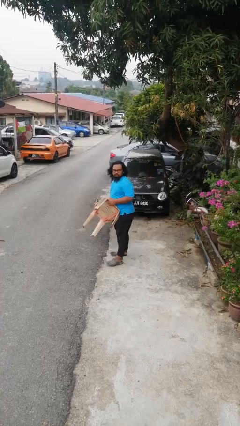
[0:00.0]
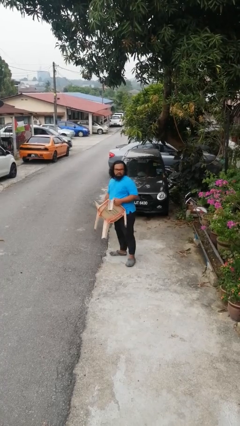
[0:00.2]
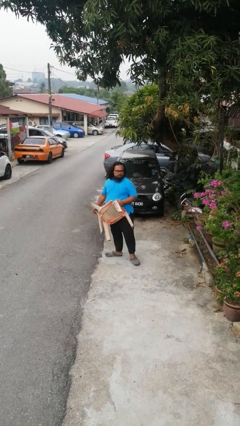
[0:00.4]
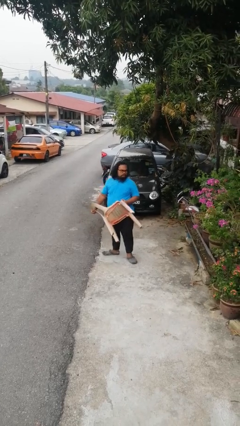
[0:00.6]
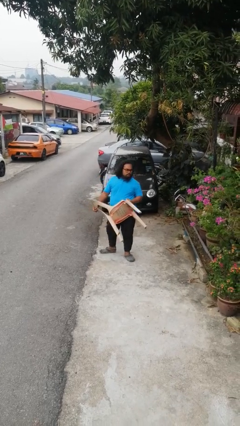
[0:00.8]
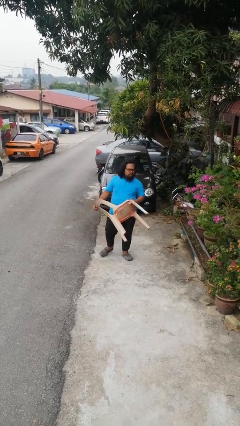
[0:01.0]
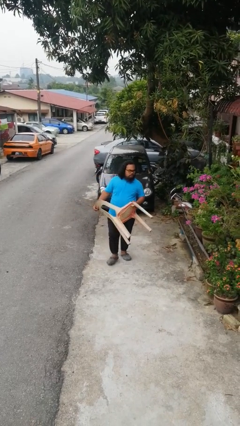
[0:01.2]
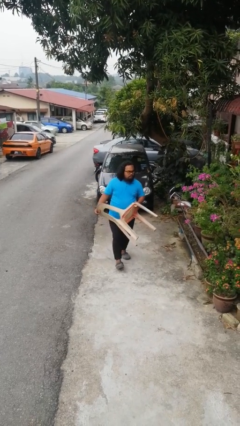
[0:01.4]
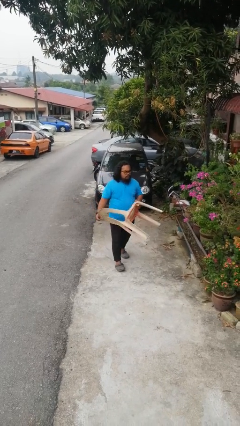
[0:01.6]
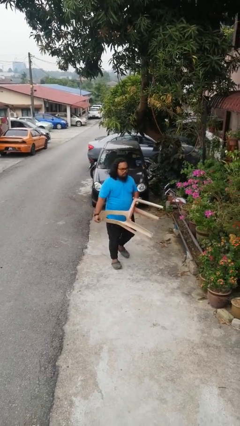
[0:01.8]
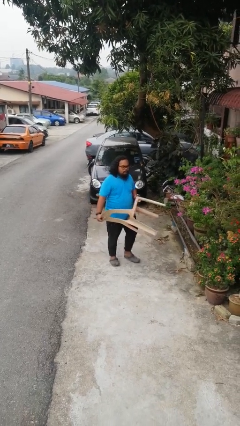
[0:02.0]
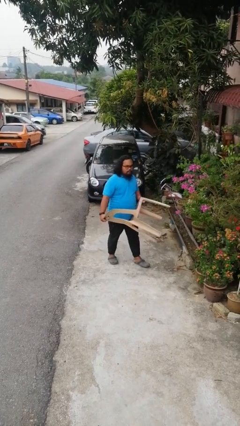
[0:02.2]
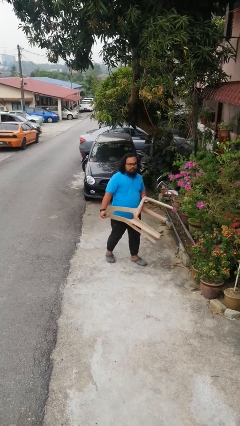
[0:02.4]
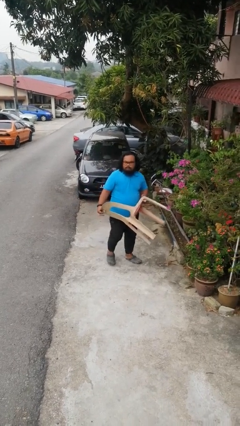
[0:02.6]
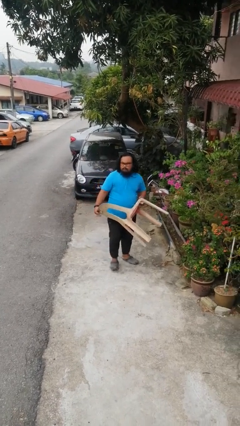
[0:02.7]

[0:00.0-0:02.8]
person carries furniture

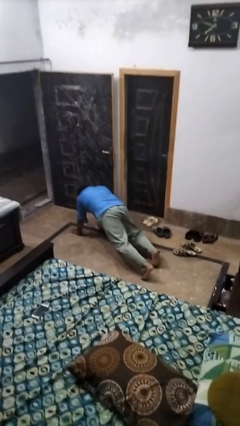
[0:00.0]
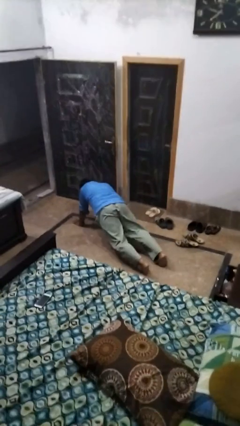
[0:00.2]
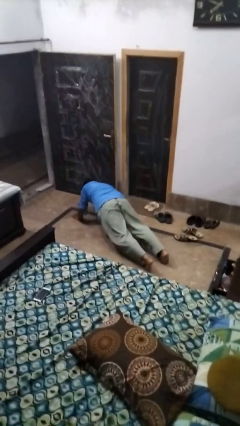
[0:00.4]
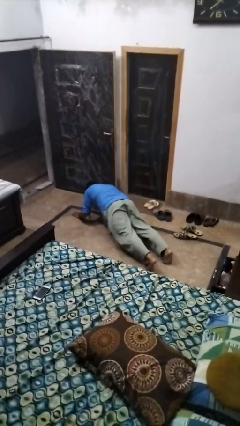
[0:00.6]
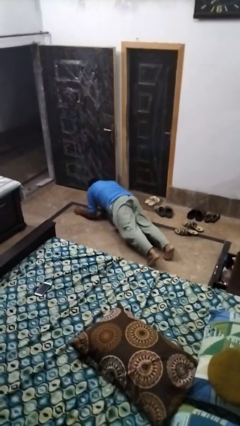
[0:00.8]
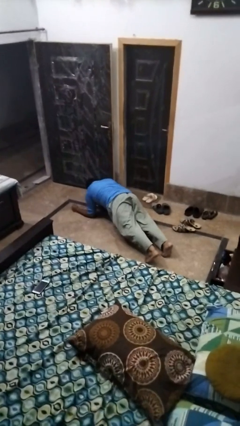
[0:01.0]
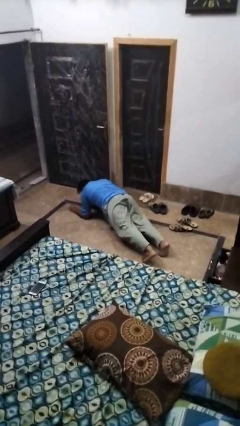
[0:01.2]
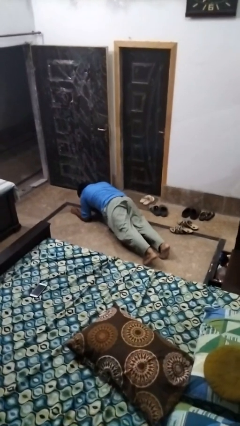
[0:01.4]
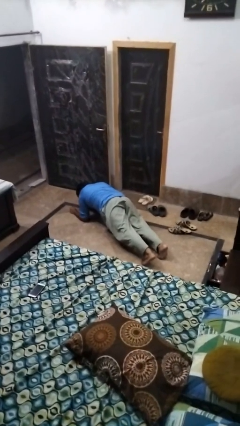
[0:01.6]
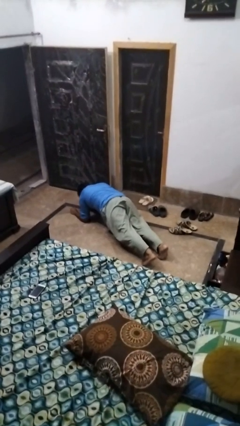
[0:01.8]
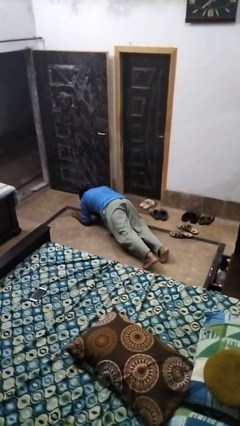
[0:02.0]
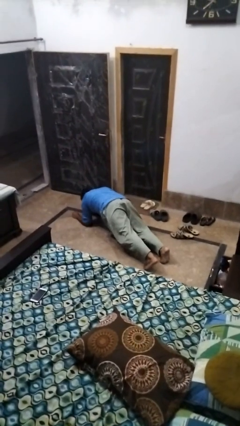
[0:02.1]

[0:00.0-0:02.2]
person exercises with plank

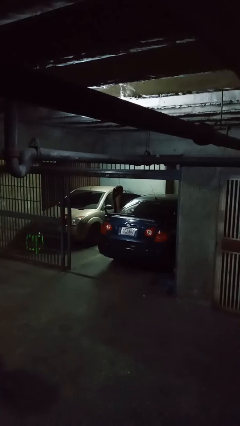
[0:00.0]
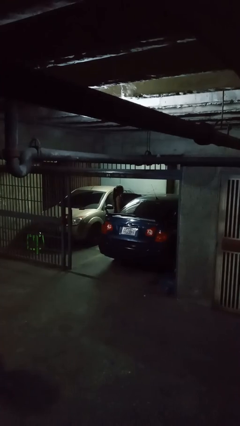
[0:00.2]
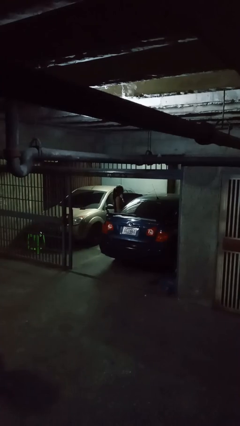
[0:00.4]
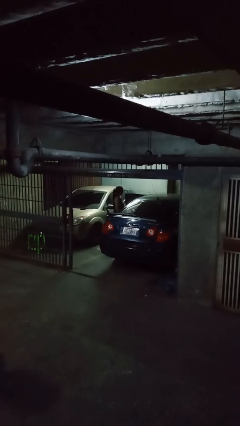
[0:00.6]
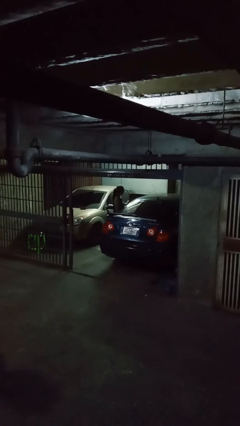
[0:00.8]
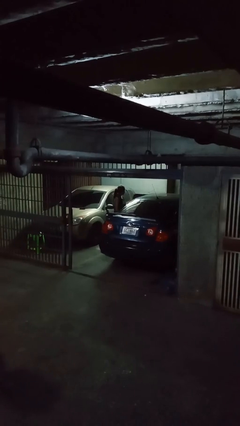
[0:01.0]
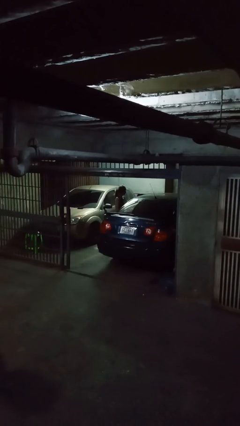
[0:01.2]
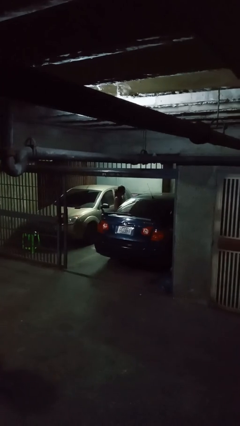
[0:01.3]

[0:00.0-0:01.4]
person closes car door

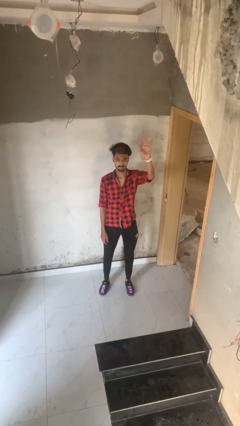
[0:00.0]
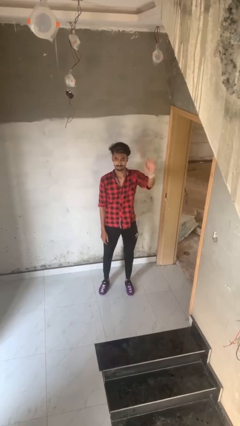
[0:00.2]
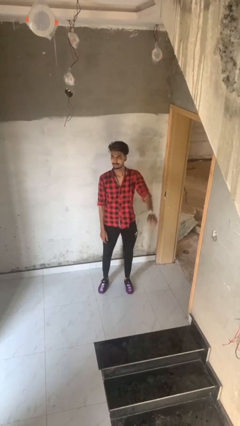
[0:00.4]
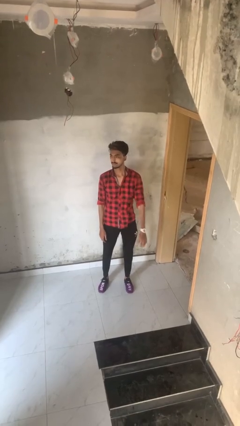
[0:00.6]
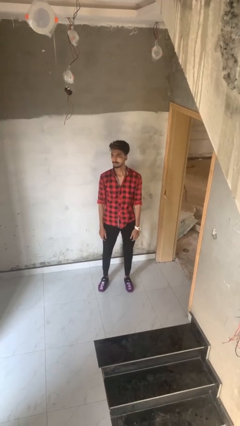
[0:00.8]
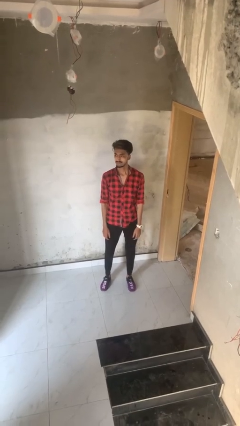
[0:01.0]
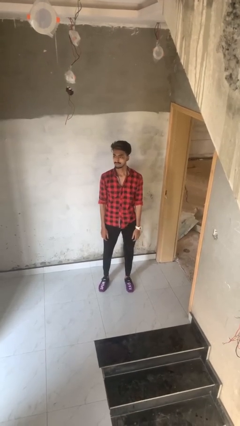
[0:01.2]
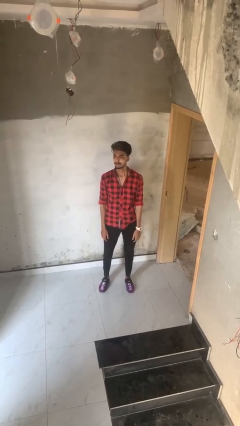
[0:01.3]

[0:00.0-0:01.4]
person gestures lower hand

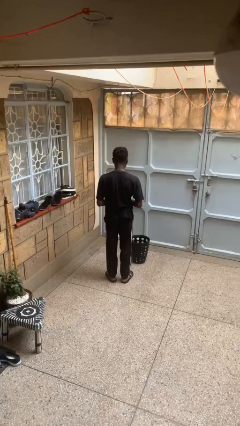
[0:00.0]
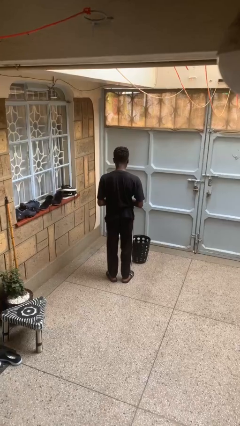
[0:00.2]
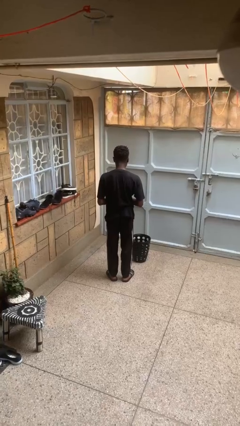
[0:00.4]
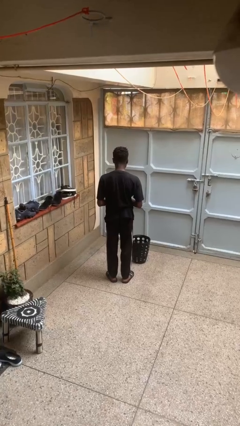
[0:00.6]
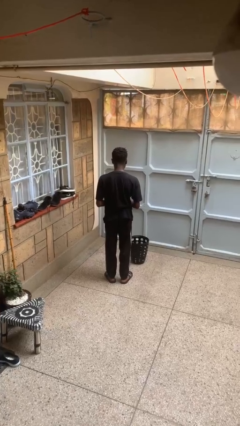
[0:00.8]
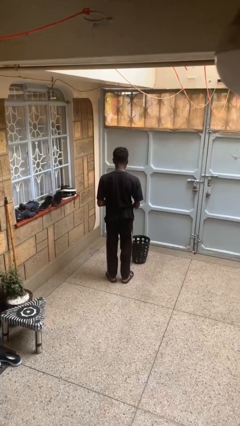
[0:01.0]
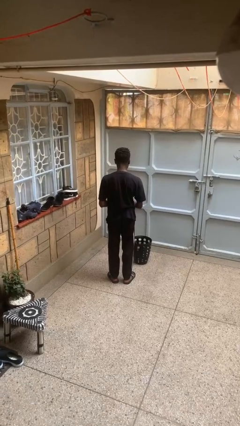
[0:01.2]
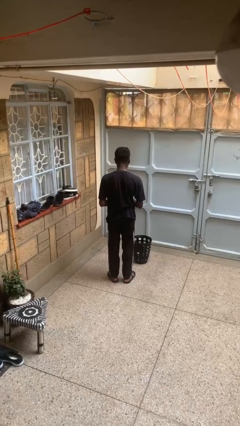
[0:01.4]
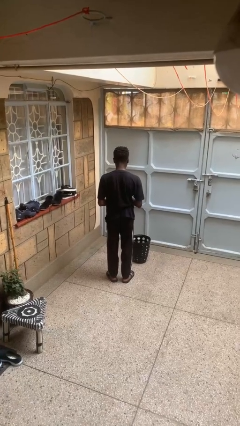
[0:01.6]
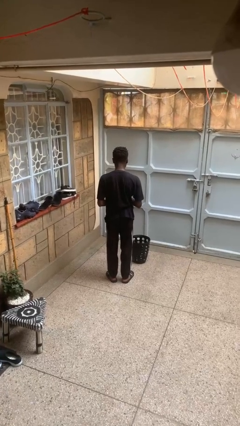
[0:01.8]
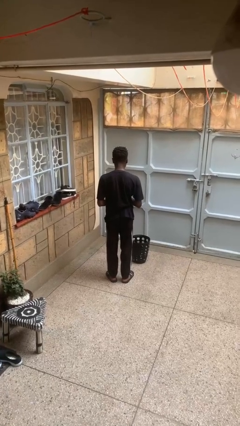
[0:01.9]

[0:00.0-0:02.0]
person discards trash

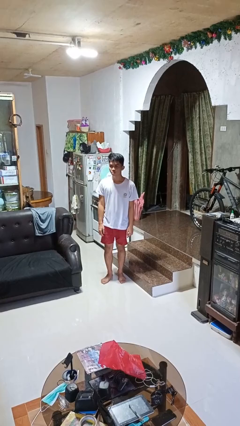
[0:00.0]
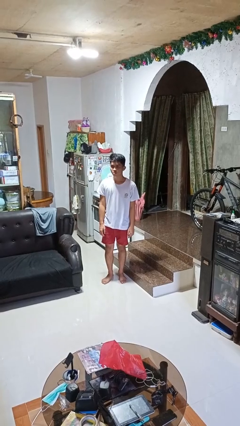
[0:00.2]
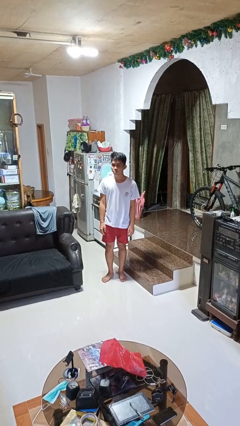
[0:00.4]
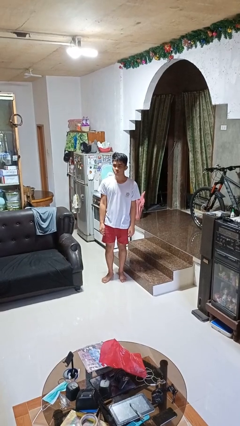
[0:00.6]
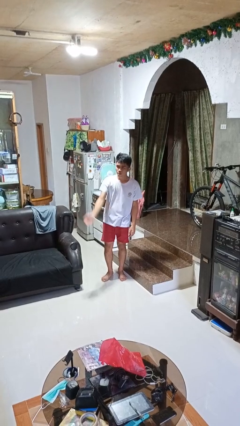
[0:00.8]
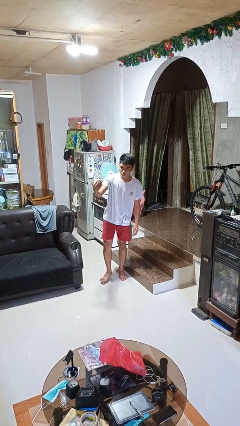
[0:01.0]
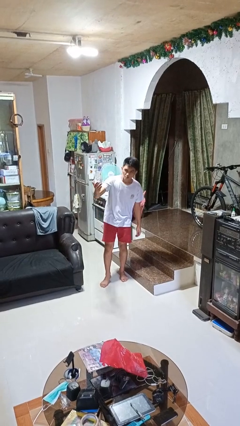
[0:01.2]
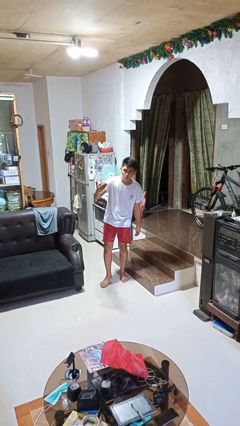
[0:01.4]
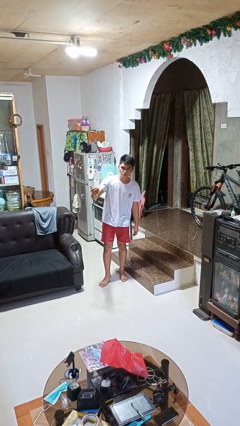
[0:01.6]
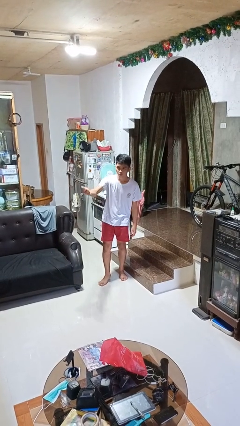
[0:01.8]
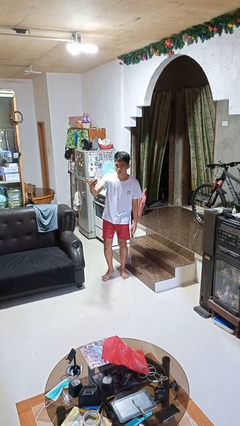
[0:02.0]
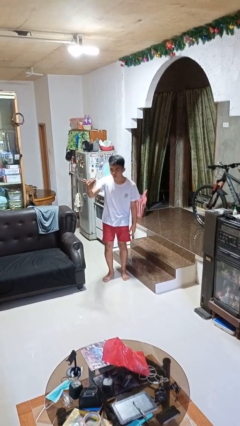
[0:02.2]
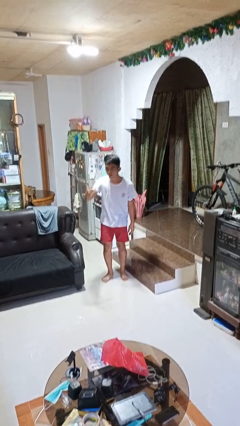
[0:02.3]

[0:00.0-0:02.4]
person gestures come here

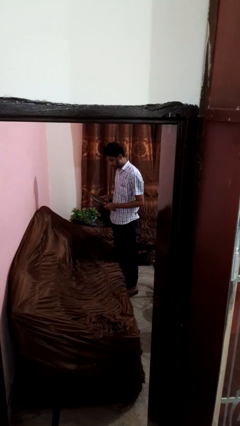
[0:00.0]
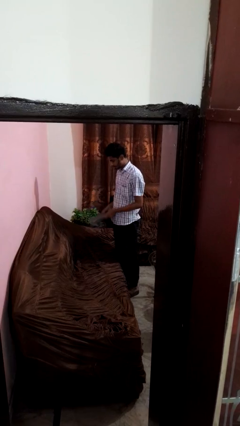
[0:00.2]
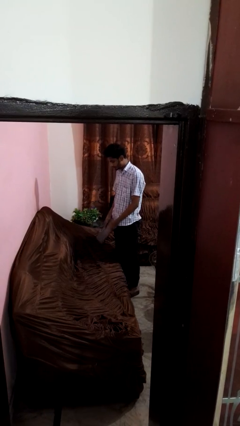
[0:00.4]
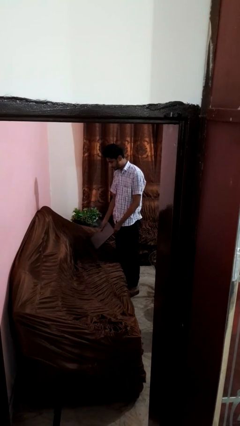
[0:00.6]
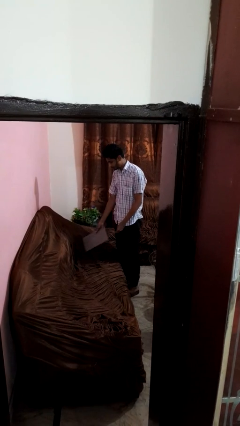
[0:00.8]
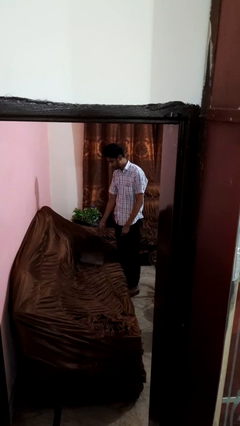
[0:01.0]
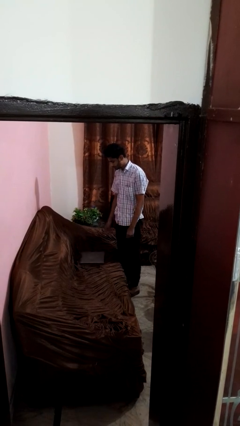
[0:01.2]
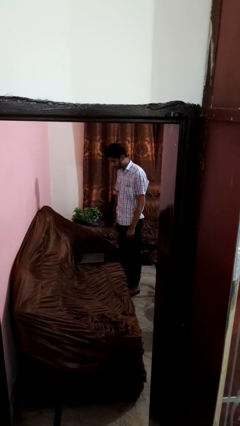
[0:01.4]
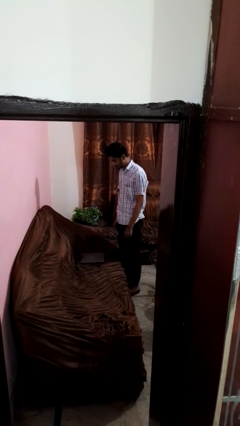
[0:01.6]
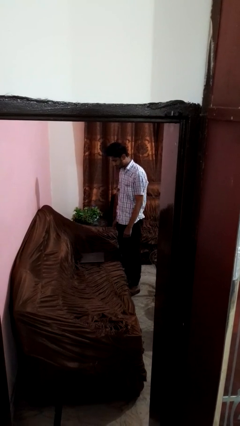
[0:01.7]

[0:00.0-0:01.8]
person puts down object on couch

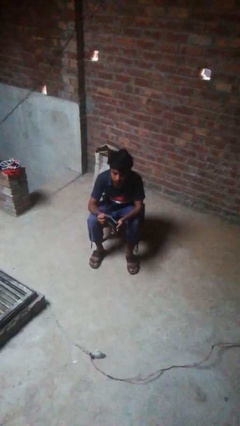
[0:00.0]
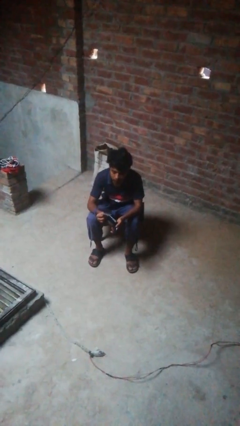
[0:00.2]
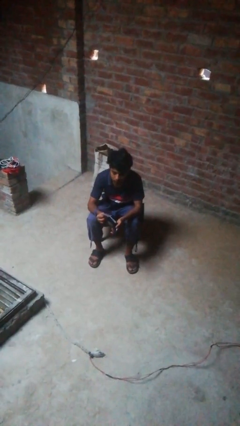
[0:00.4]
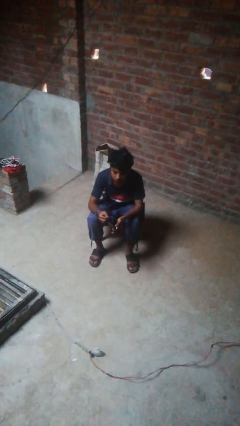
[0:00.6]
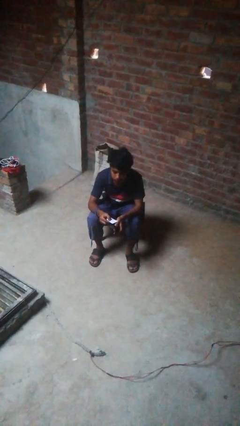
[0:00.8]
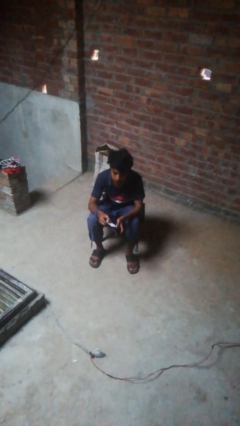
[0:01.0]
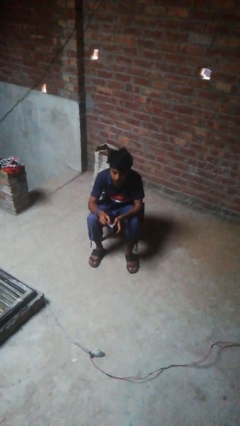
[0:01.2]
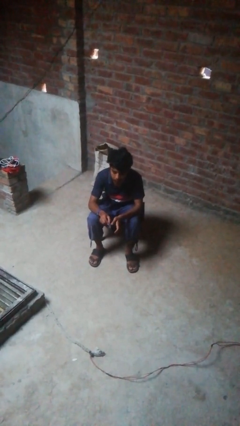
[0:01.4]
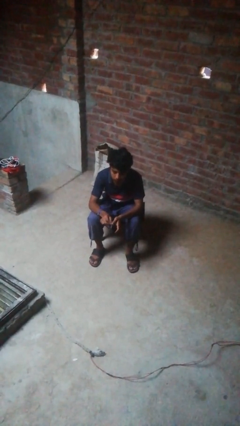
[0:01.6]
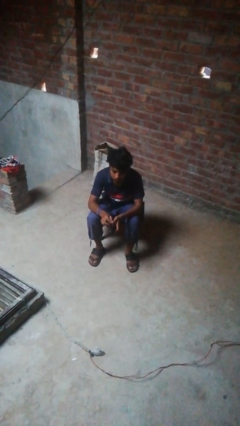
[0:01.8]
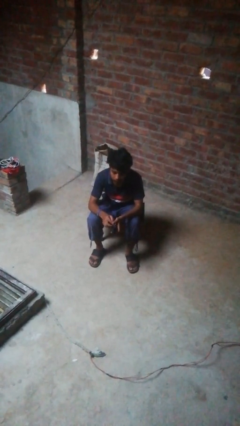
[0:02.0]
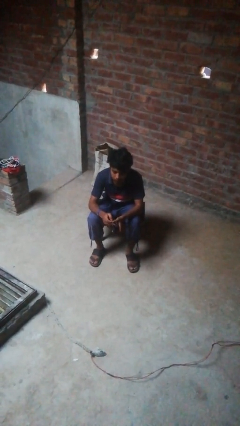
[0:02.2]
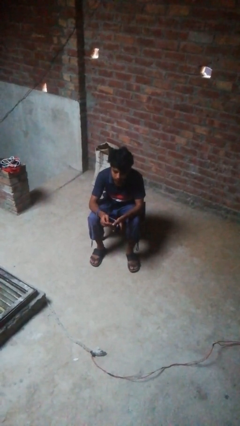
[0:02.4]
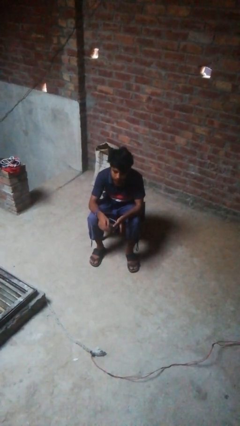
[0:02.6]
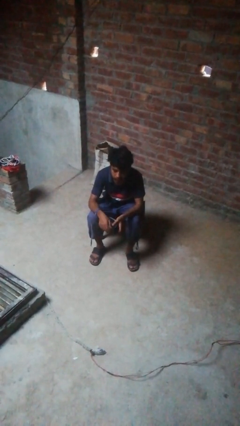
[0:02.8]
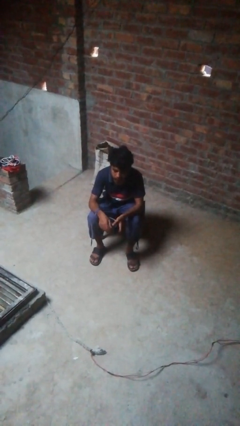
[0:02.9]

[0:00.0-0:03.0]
person puts object into purse
